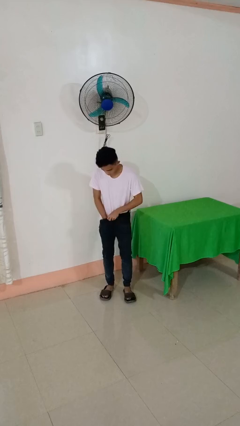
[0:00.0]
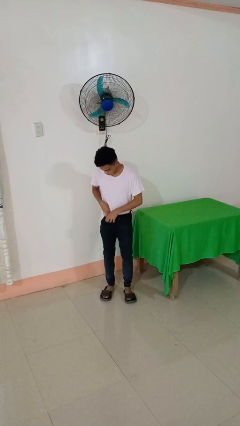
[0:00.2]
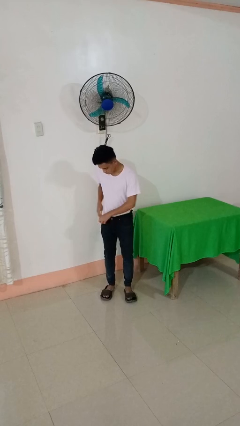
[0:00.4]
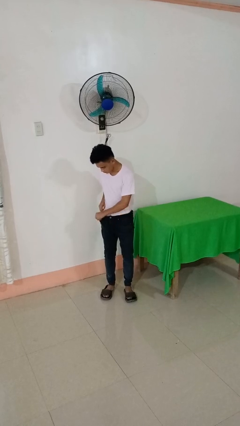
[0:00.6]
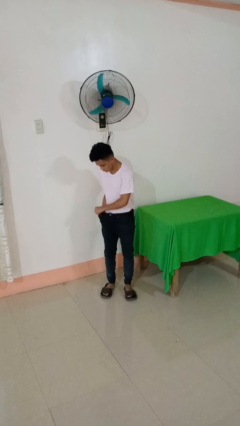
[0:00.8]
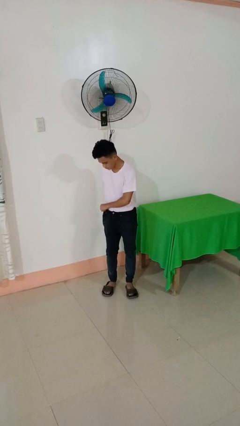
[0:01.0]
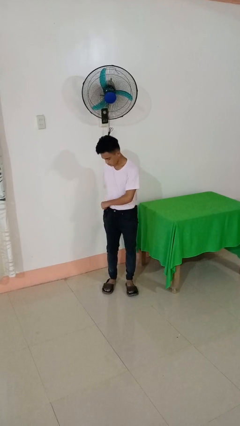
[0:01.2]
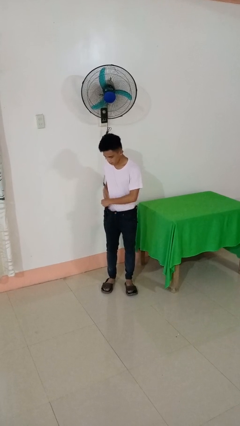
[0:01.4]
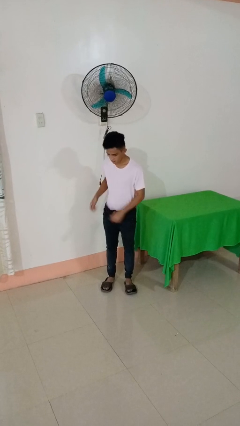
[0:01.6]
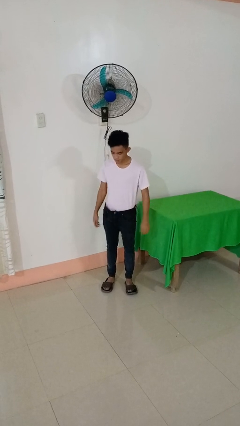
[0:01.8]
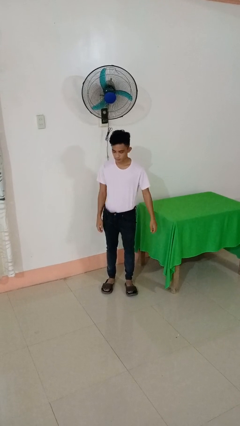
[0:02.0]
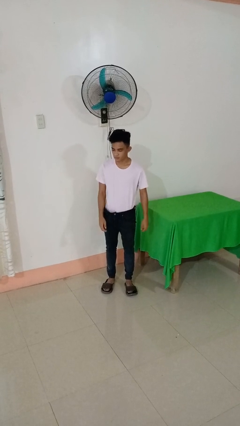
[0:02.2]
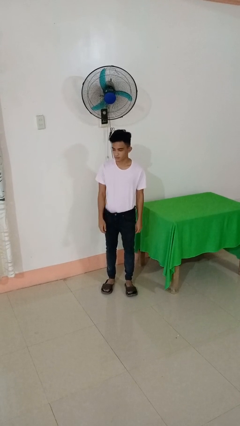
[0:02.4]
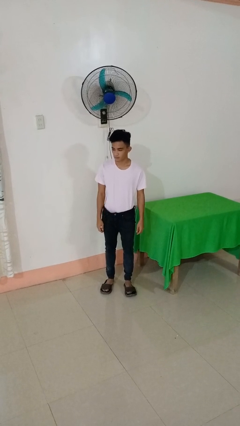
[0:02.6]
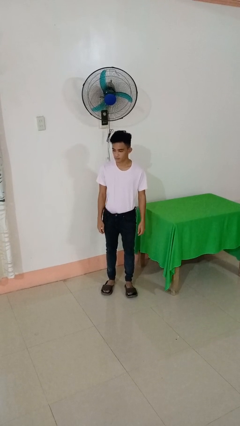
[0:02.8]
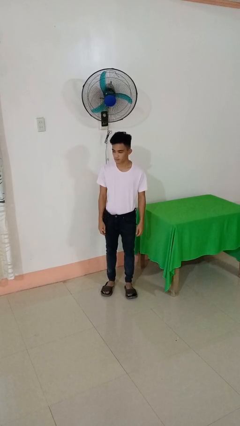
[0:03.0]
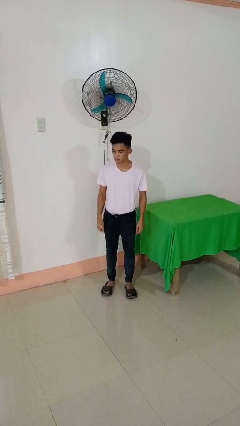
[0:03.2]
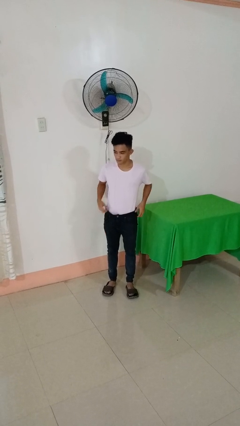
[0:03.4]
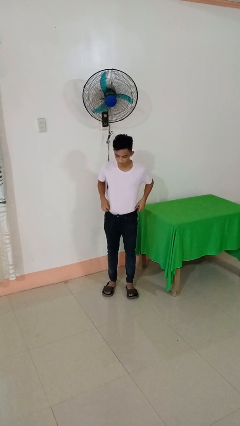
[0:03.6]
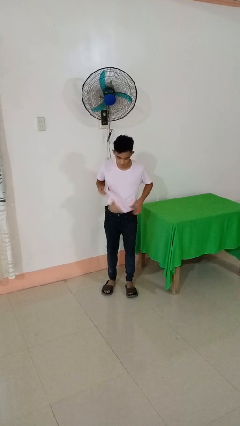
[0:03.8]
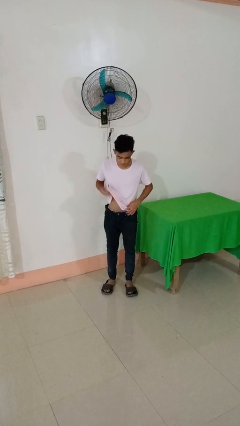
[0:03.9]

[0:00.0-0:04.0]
person tucks in shirt

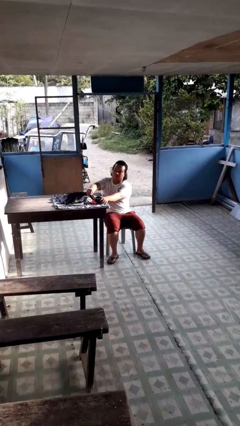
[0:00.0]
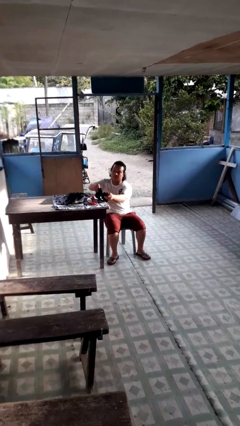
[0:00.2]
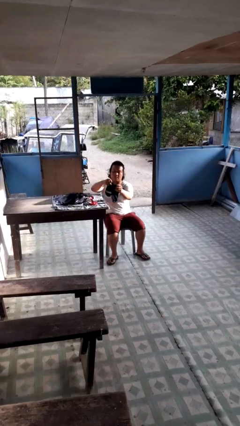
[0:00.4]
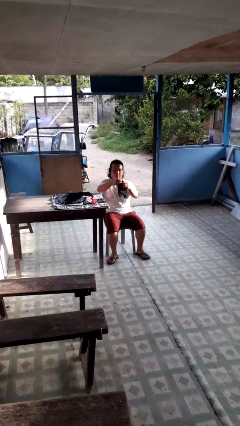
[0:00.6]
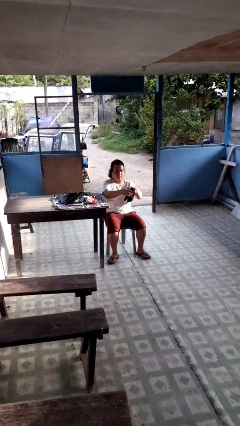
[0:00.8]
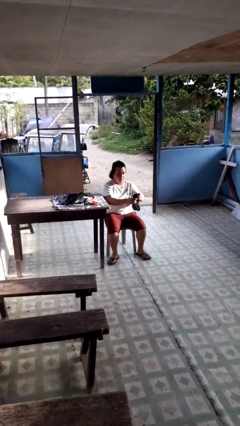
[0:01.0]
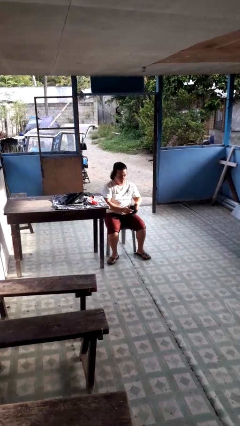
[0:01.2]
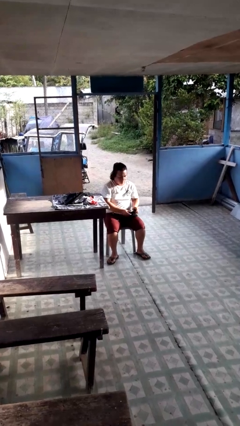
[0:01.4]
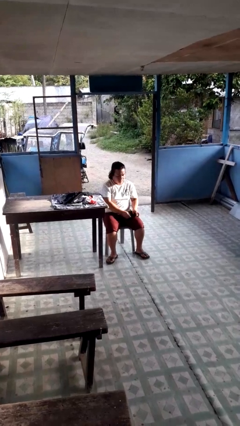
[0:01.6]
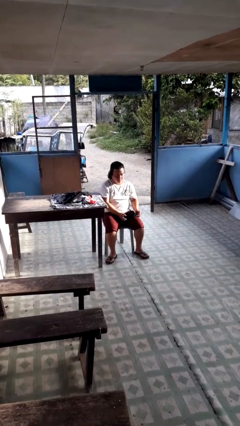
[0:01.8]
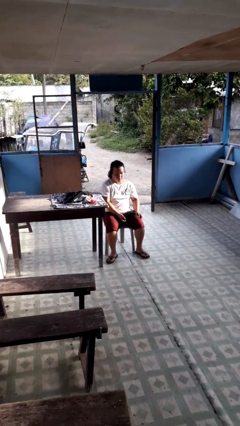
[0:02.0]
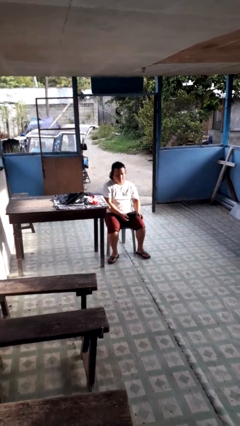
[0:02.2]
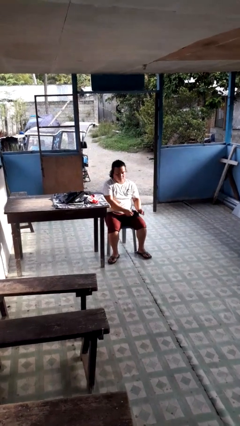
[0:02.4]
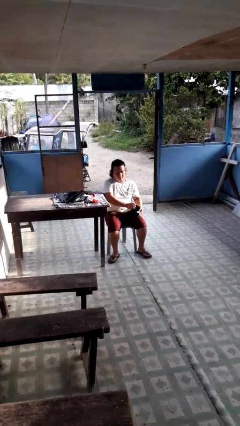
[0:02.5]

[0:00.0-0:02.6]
person folds socks

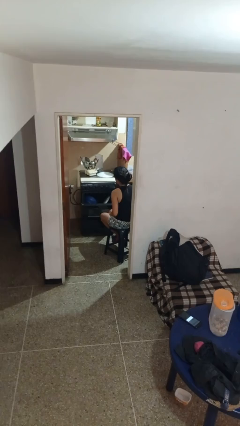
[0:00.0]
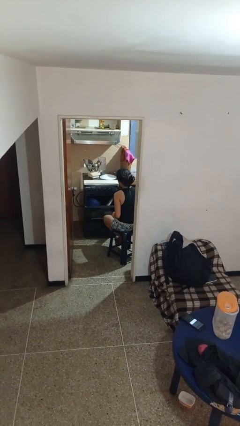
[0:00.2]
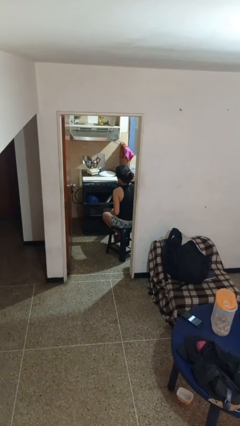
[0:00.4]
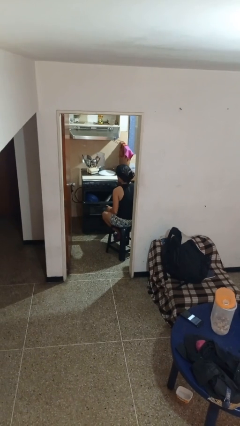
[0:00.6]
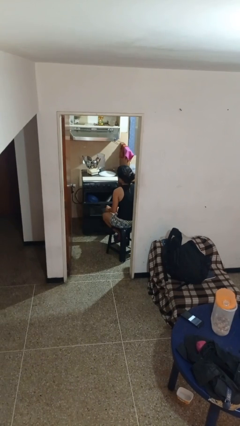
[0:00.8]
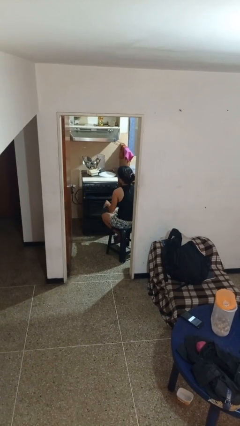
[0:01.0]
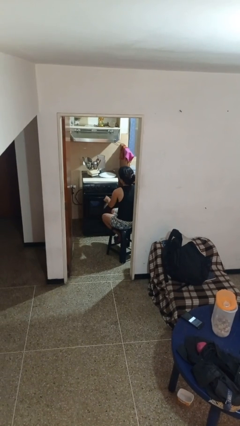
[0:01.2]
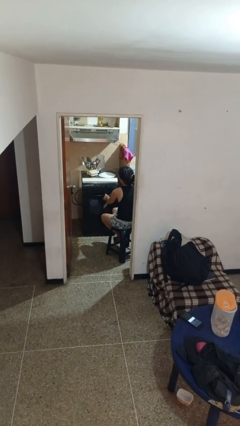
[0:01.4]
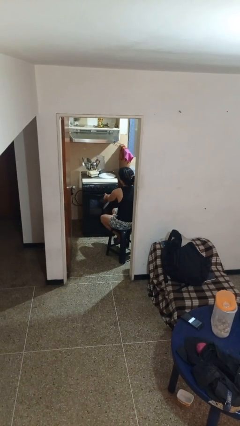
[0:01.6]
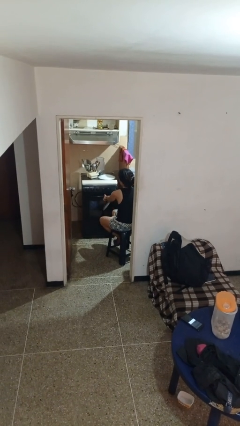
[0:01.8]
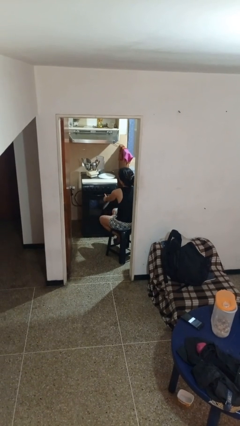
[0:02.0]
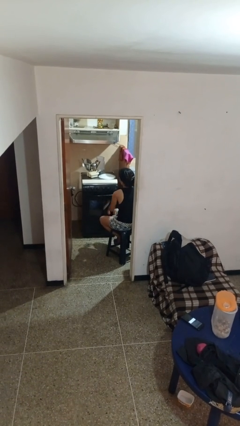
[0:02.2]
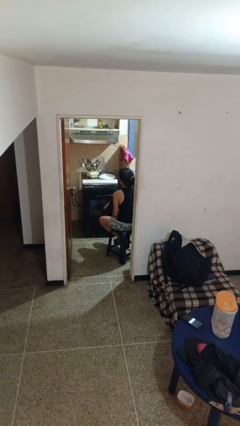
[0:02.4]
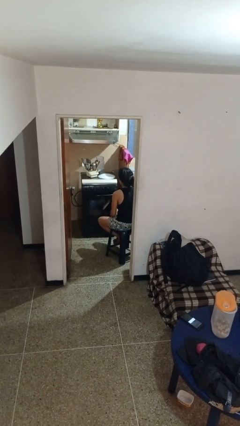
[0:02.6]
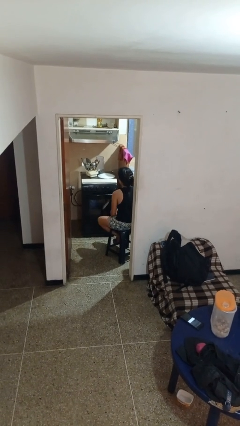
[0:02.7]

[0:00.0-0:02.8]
person closes dishwasher

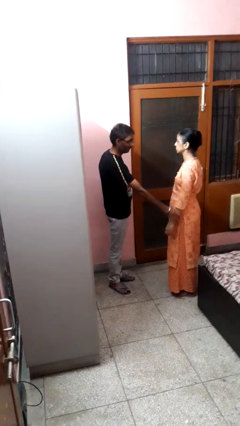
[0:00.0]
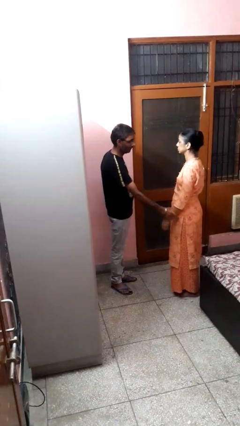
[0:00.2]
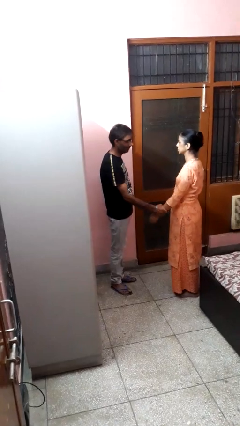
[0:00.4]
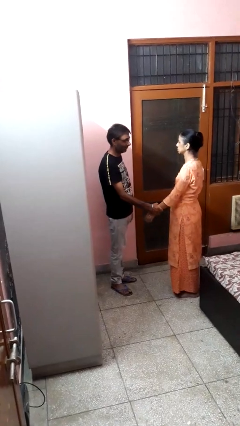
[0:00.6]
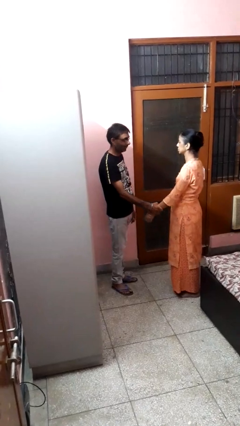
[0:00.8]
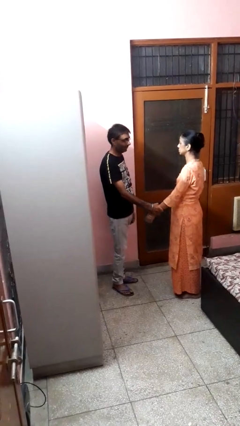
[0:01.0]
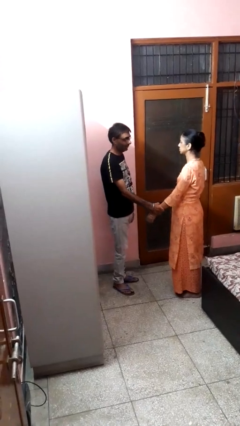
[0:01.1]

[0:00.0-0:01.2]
person grabs person by forearm

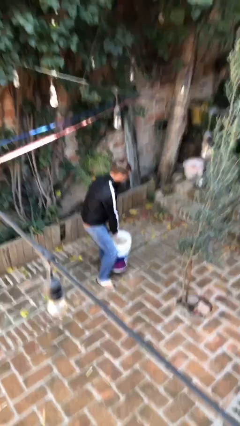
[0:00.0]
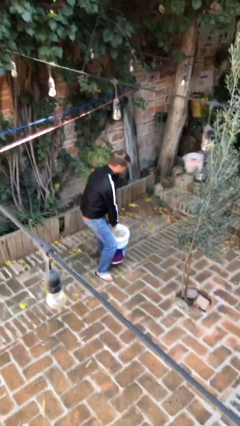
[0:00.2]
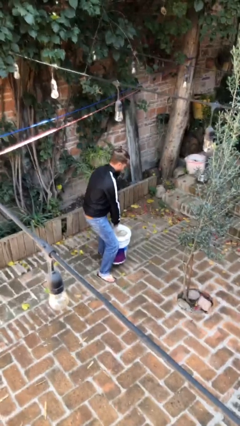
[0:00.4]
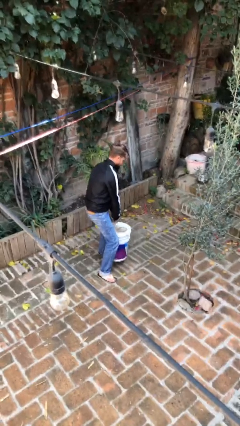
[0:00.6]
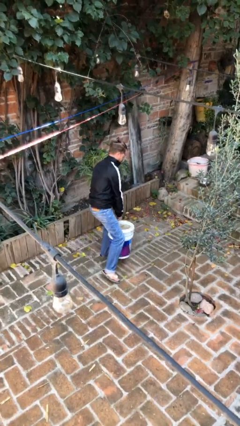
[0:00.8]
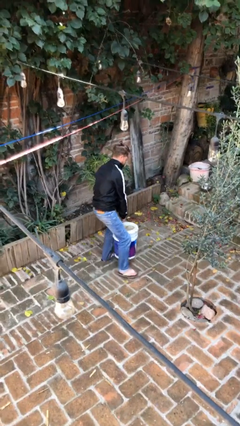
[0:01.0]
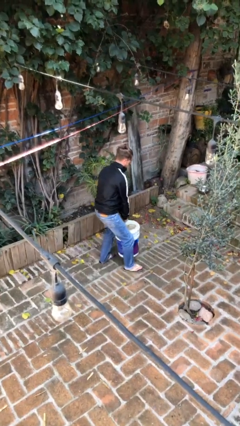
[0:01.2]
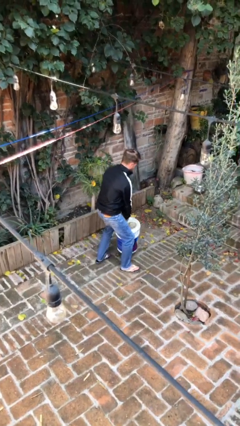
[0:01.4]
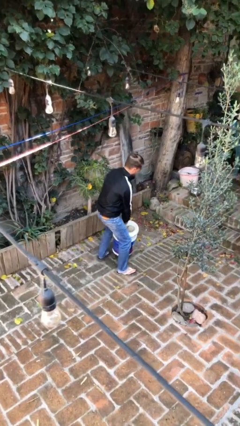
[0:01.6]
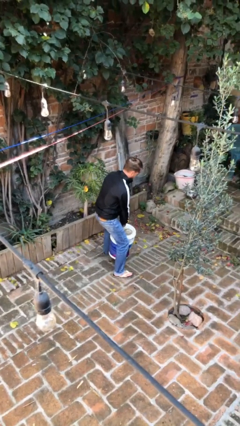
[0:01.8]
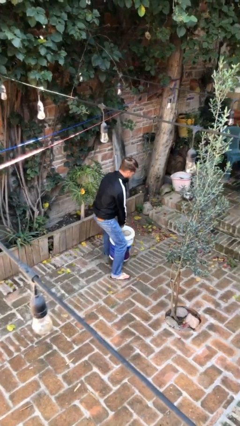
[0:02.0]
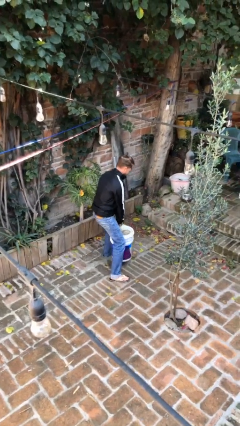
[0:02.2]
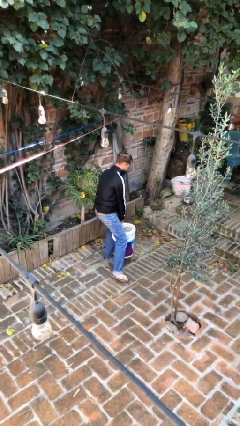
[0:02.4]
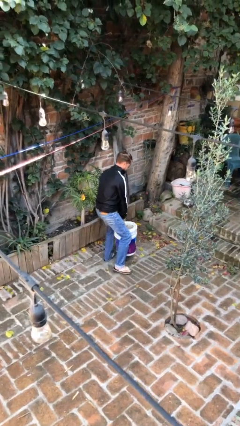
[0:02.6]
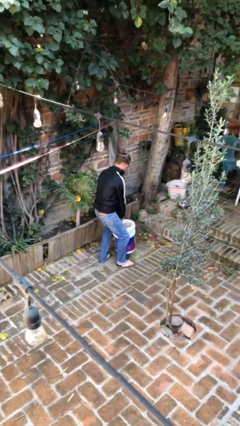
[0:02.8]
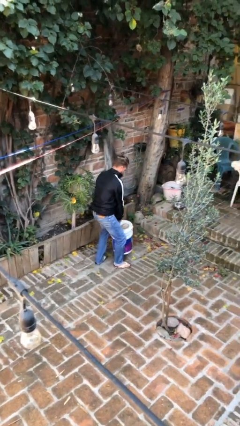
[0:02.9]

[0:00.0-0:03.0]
person carries heavy object

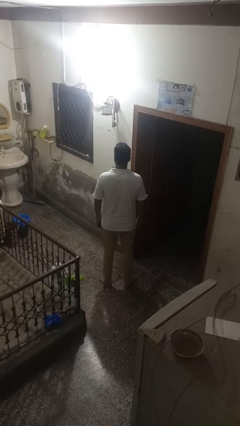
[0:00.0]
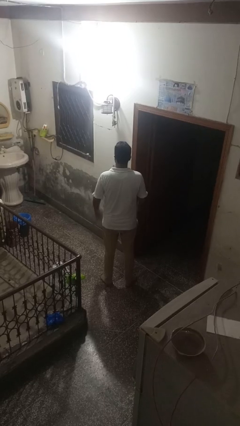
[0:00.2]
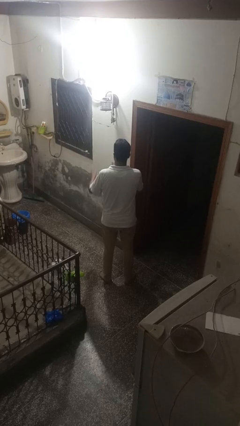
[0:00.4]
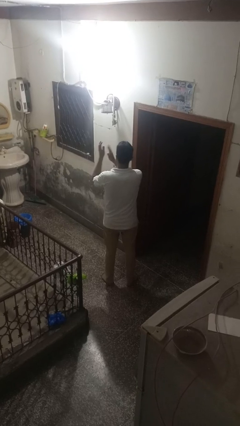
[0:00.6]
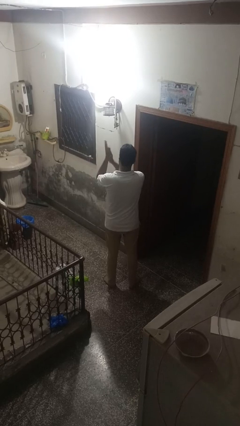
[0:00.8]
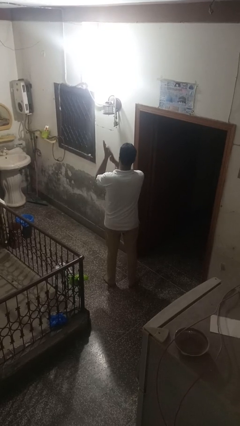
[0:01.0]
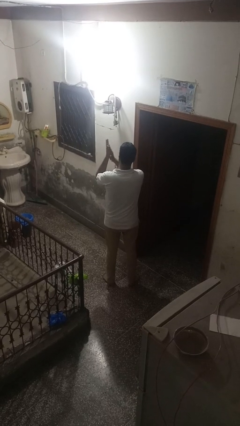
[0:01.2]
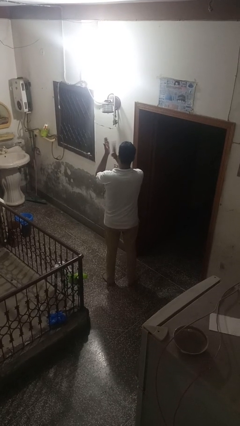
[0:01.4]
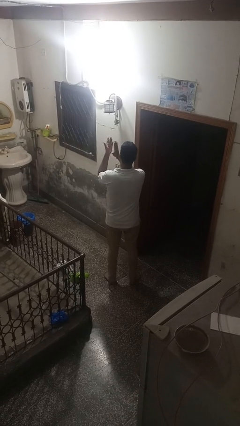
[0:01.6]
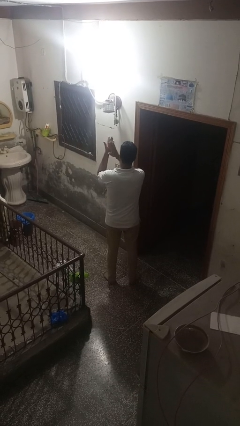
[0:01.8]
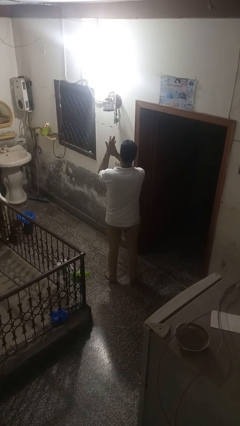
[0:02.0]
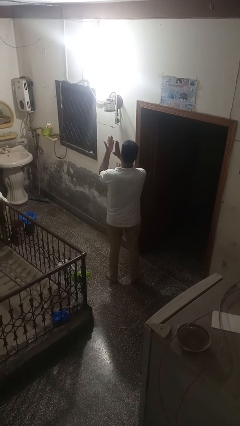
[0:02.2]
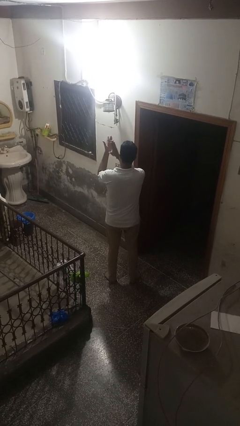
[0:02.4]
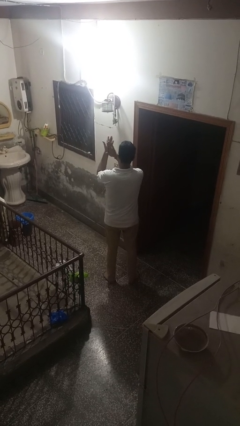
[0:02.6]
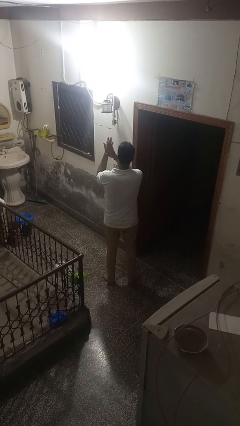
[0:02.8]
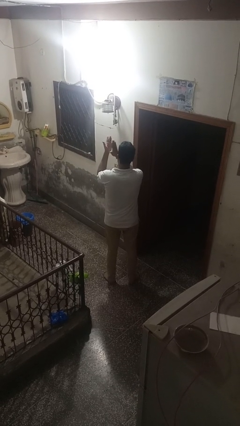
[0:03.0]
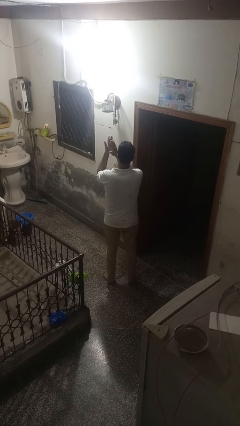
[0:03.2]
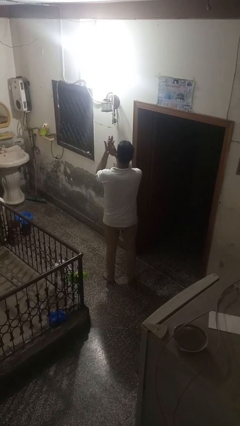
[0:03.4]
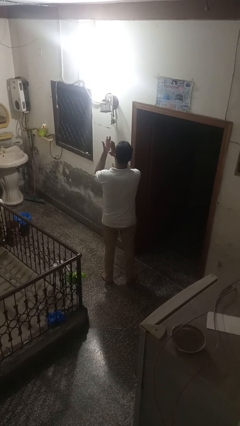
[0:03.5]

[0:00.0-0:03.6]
person claps hands
